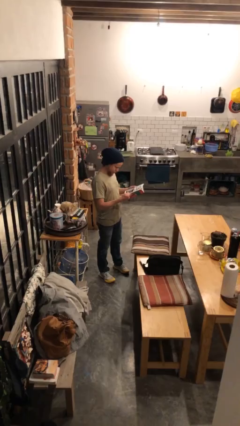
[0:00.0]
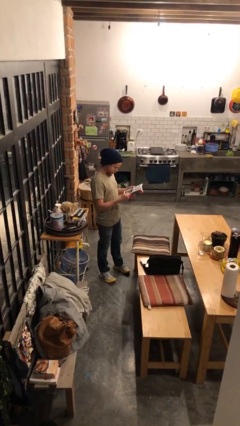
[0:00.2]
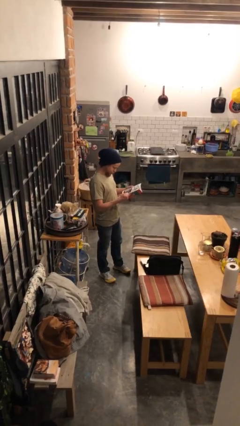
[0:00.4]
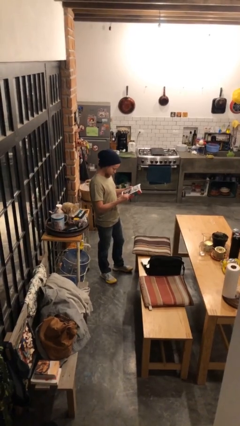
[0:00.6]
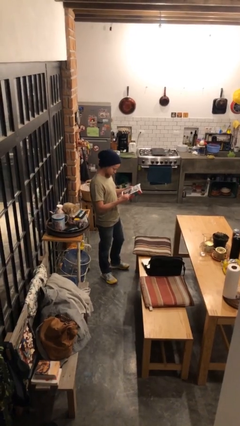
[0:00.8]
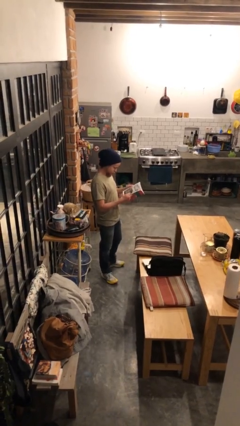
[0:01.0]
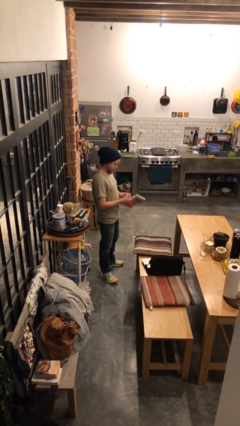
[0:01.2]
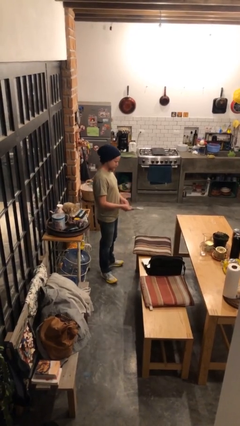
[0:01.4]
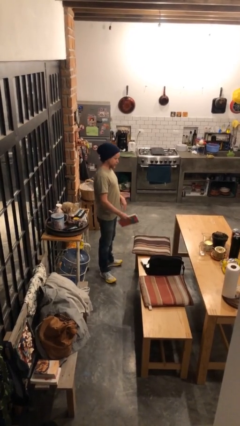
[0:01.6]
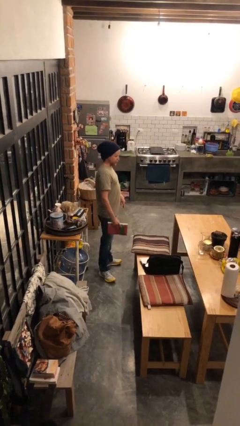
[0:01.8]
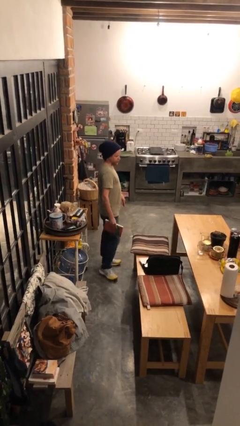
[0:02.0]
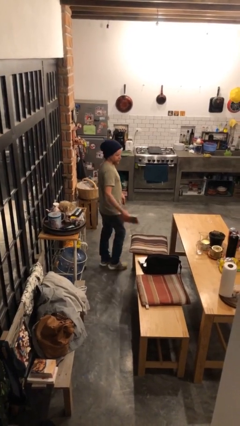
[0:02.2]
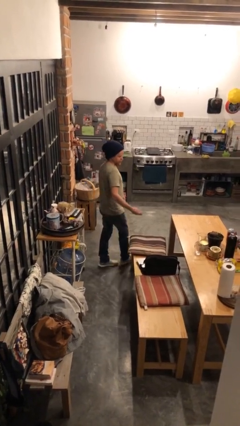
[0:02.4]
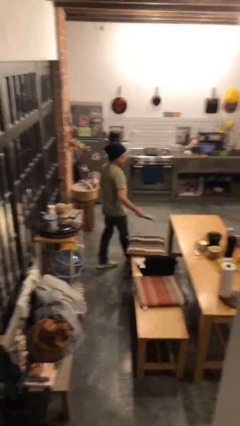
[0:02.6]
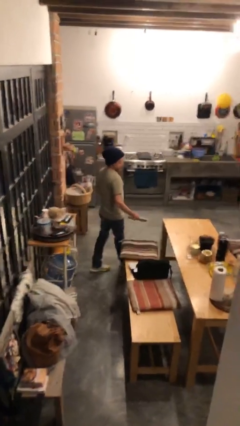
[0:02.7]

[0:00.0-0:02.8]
person reads document

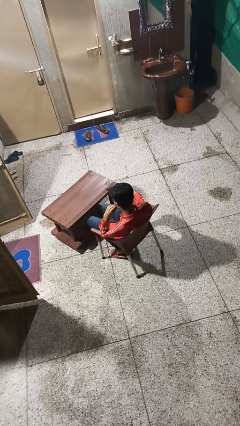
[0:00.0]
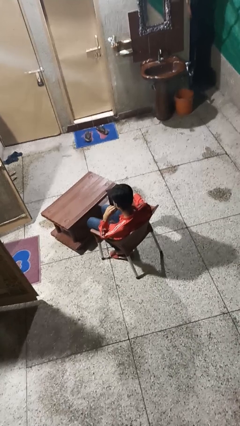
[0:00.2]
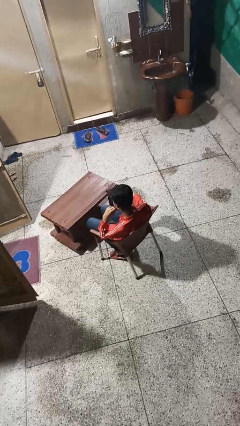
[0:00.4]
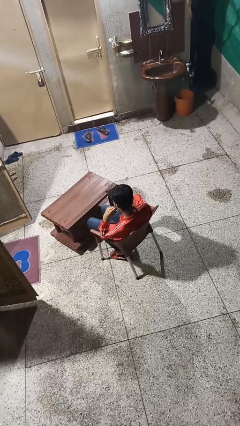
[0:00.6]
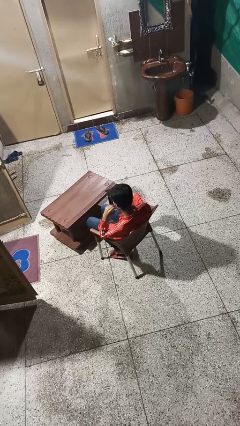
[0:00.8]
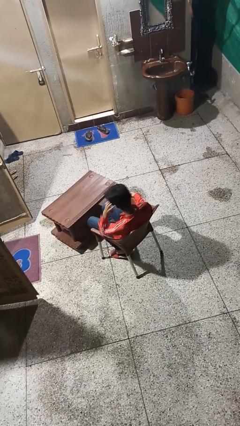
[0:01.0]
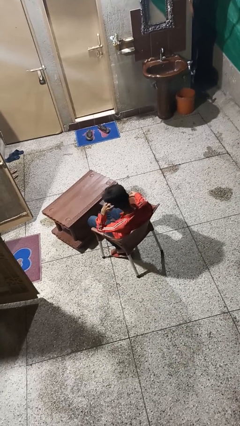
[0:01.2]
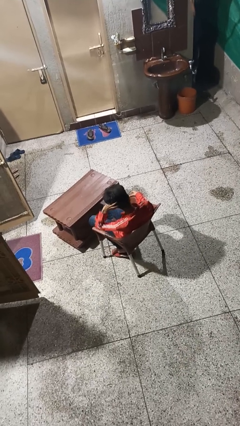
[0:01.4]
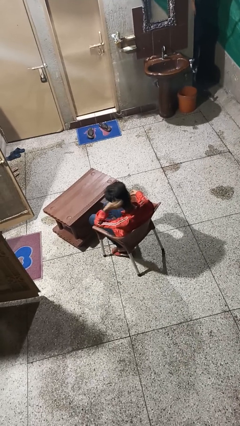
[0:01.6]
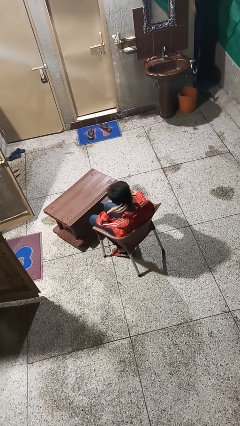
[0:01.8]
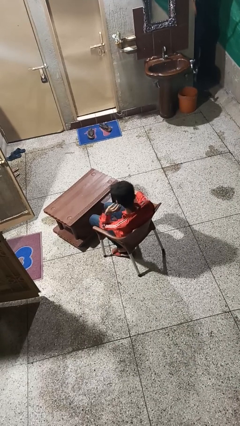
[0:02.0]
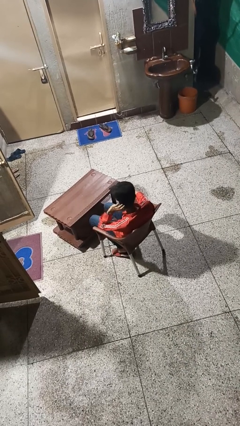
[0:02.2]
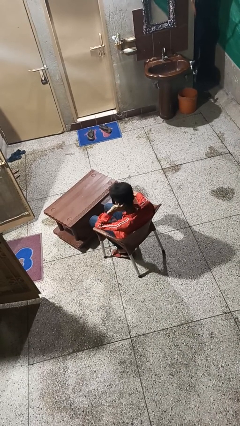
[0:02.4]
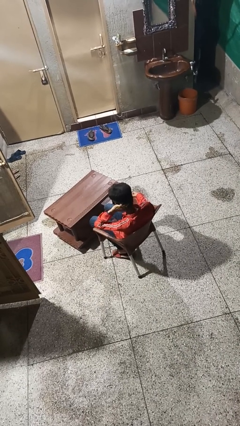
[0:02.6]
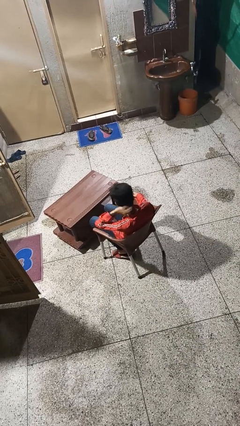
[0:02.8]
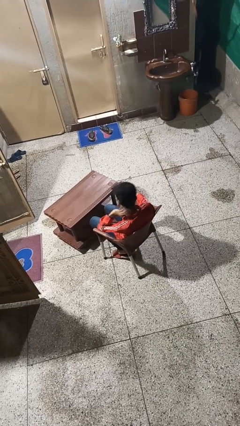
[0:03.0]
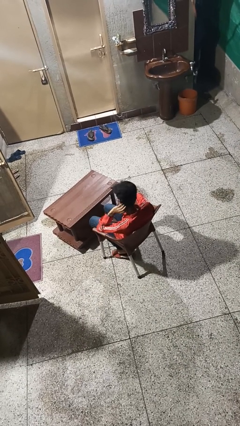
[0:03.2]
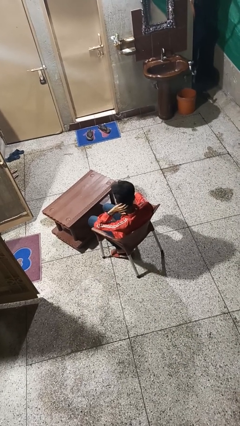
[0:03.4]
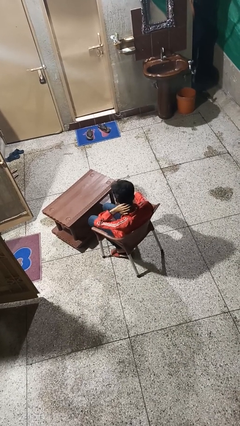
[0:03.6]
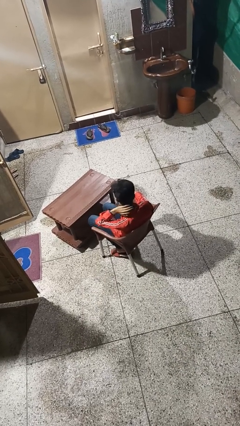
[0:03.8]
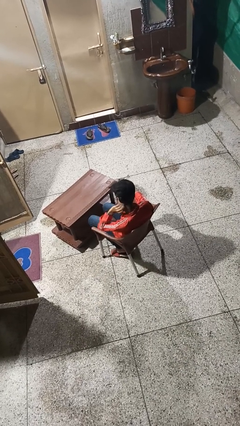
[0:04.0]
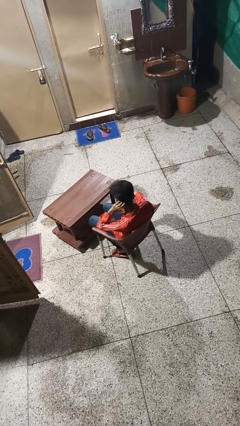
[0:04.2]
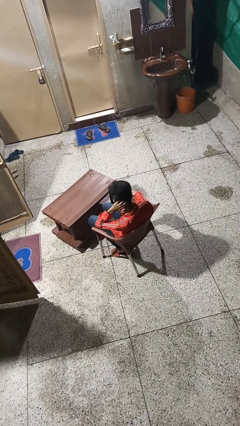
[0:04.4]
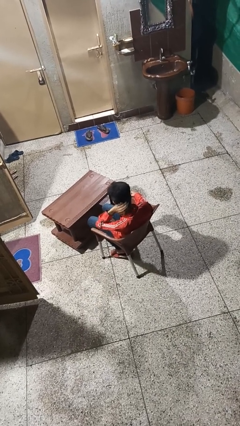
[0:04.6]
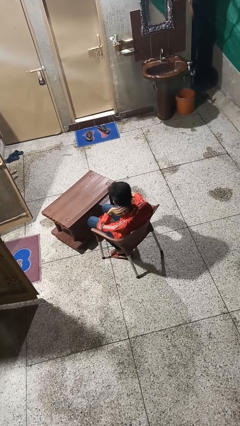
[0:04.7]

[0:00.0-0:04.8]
person strokes hair

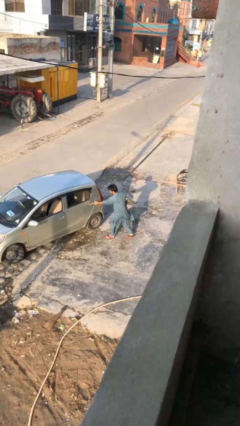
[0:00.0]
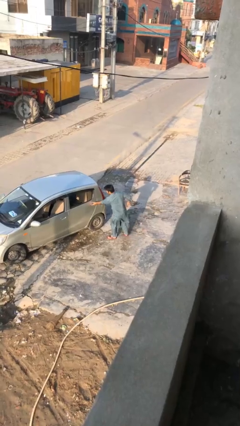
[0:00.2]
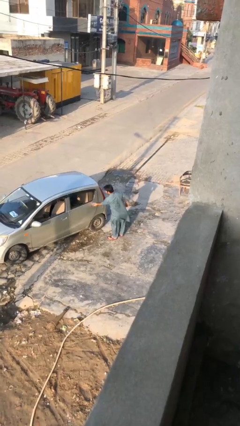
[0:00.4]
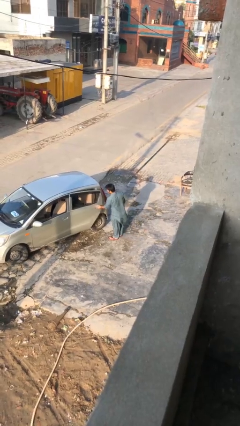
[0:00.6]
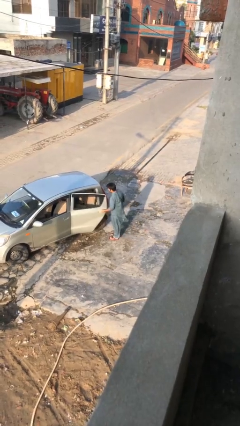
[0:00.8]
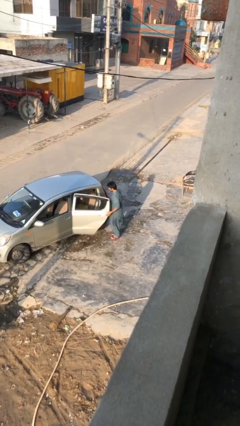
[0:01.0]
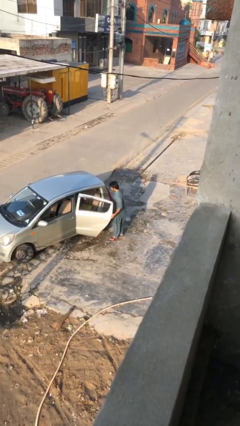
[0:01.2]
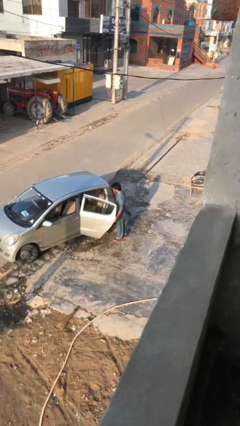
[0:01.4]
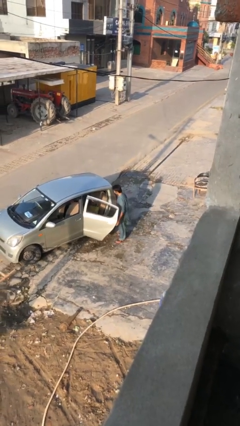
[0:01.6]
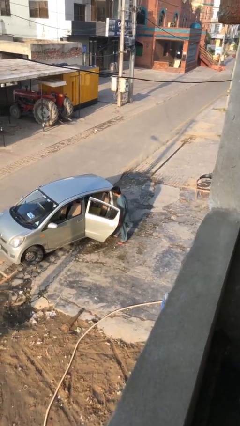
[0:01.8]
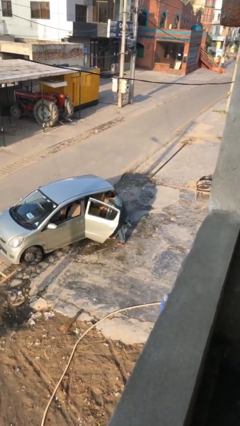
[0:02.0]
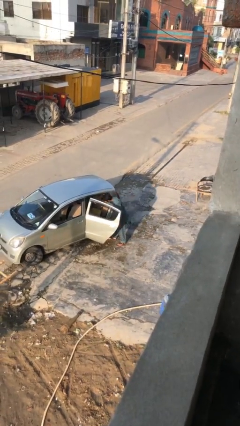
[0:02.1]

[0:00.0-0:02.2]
person opens car door

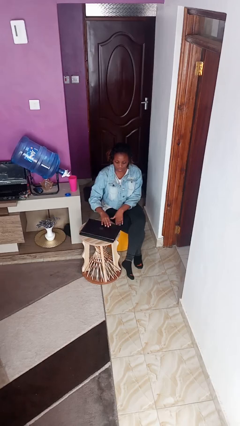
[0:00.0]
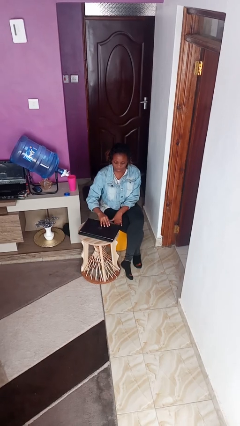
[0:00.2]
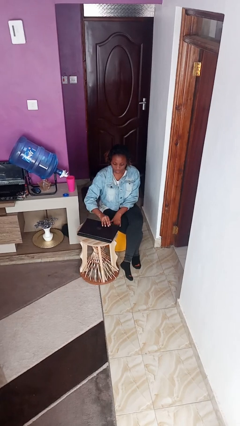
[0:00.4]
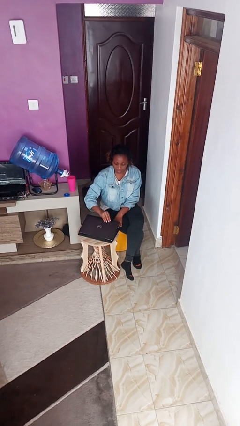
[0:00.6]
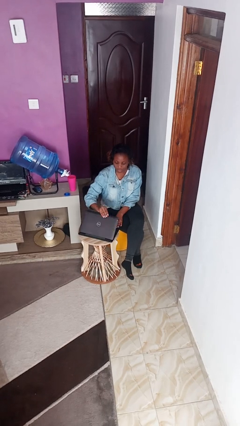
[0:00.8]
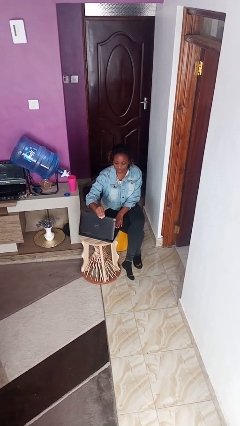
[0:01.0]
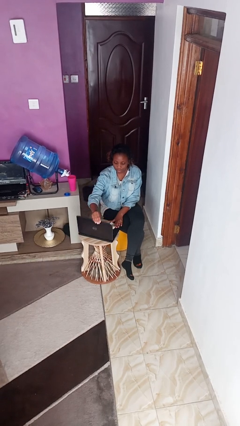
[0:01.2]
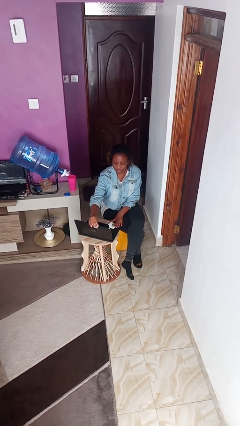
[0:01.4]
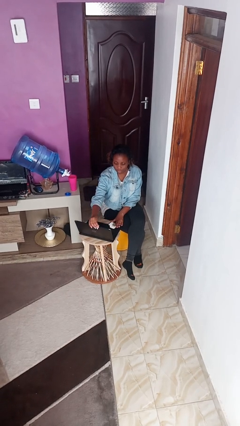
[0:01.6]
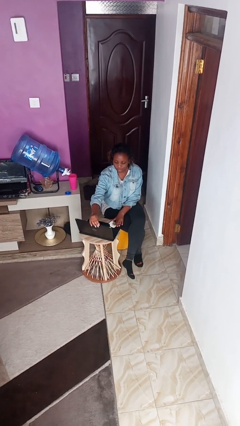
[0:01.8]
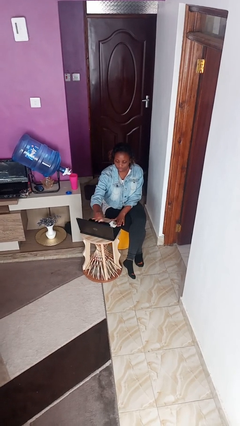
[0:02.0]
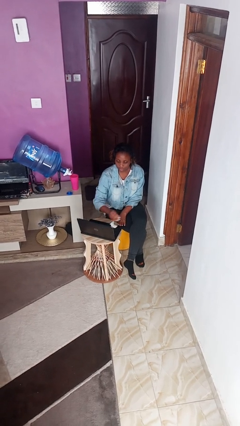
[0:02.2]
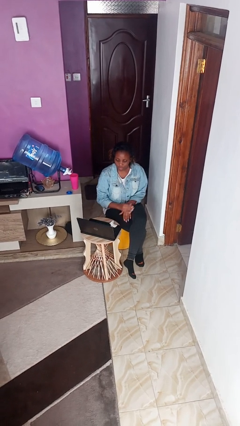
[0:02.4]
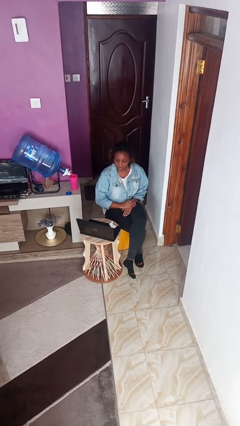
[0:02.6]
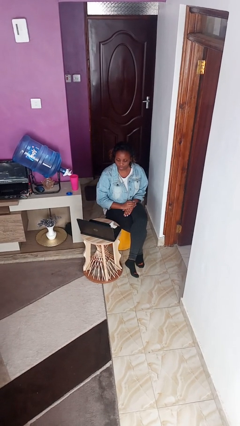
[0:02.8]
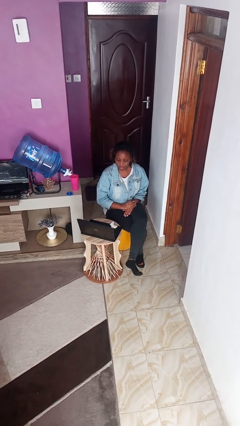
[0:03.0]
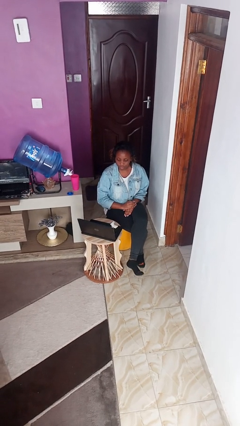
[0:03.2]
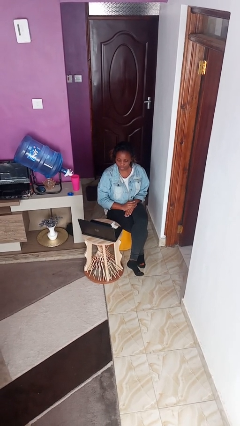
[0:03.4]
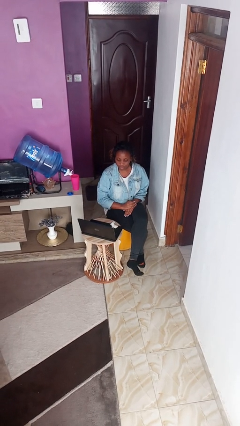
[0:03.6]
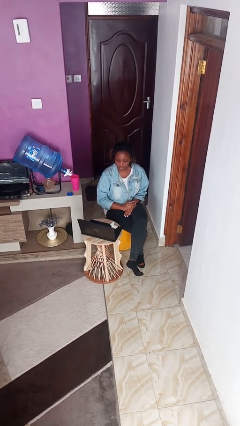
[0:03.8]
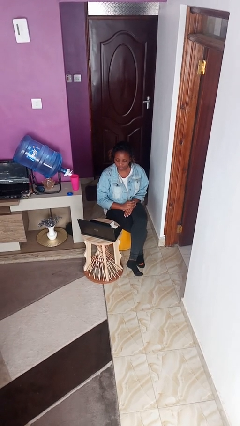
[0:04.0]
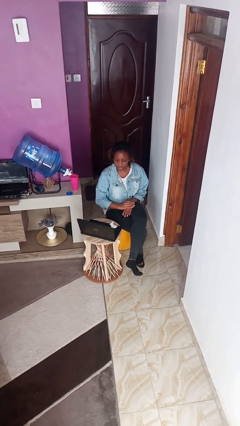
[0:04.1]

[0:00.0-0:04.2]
person opens laptop

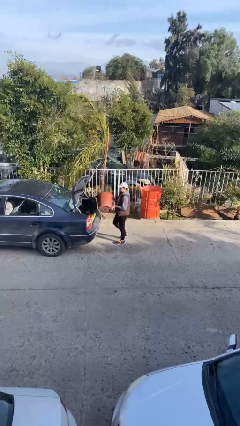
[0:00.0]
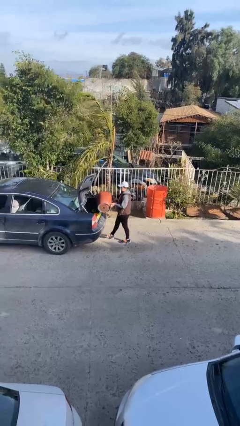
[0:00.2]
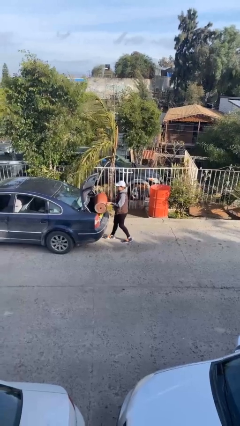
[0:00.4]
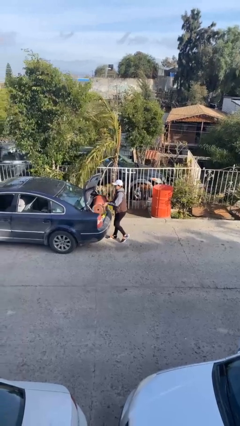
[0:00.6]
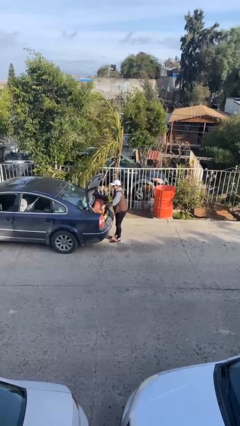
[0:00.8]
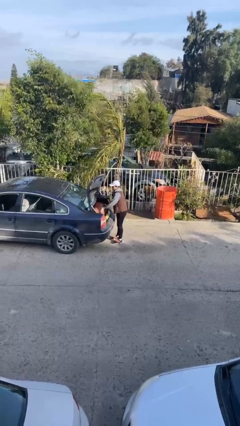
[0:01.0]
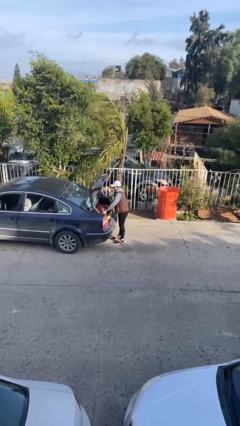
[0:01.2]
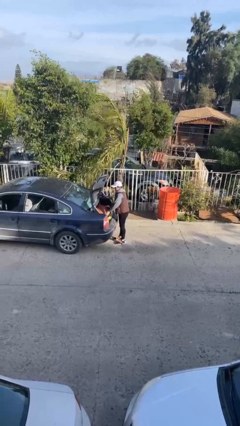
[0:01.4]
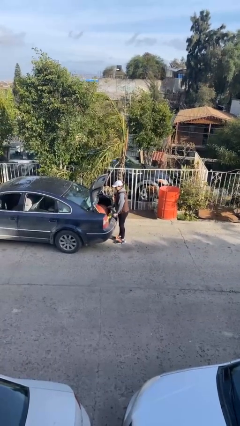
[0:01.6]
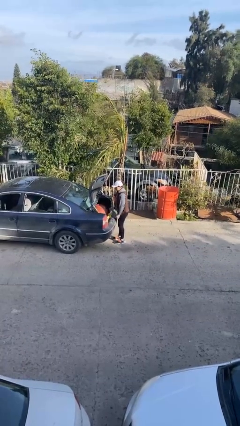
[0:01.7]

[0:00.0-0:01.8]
person loads car

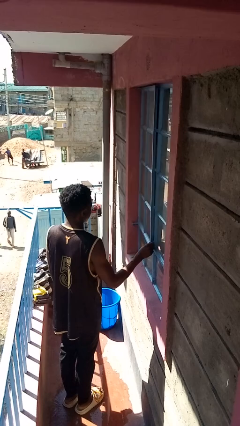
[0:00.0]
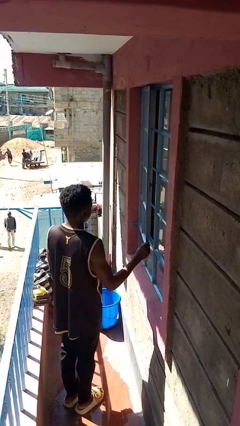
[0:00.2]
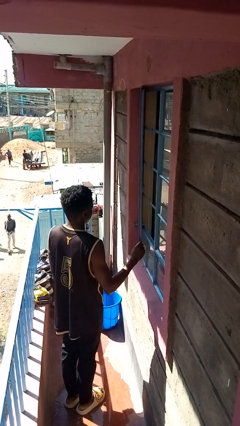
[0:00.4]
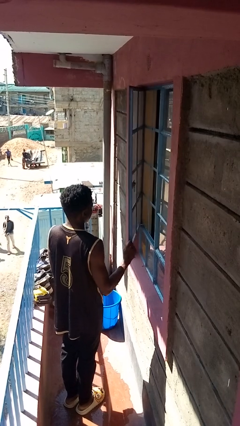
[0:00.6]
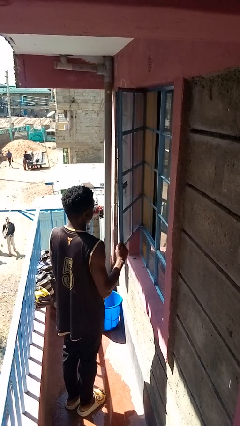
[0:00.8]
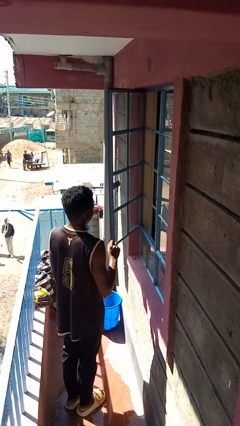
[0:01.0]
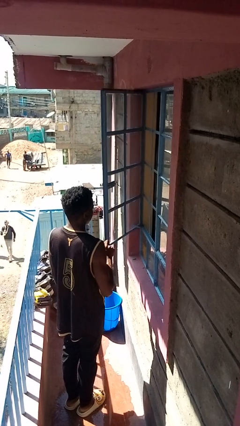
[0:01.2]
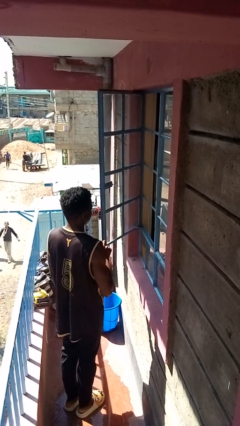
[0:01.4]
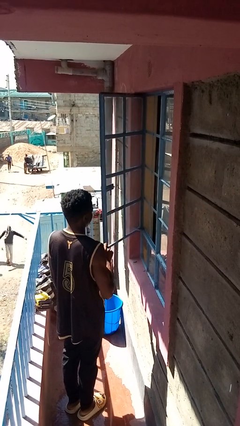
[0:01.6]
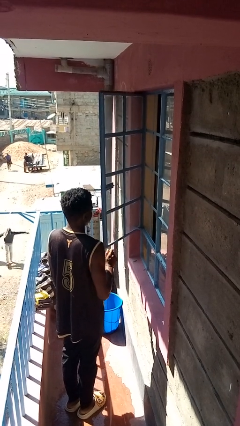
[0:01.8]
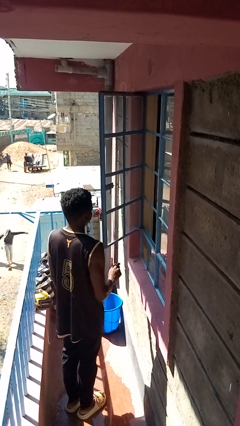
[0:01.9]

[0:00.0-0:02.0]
person opens home window
